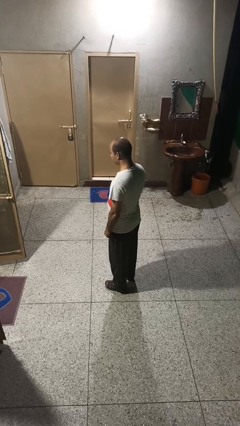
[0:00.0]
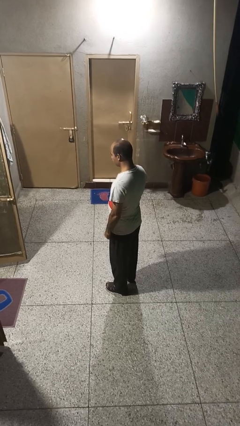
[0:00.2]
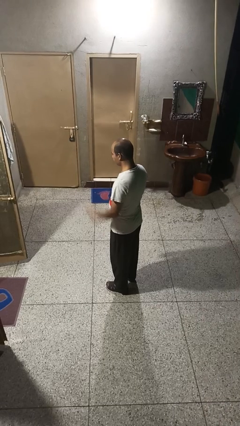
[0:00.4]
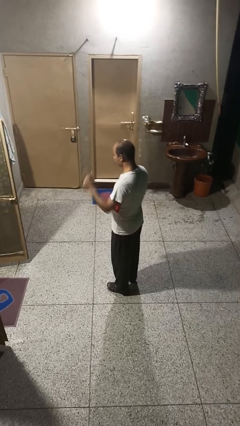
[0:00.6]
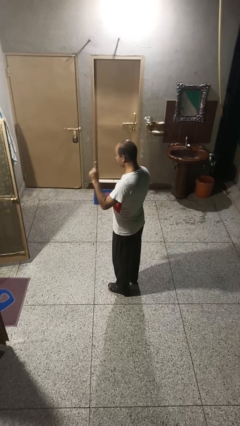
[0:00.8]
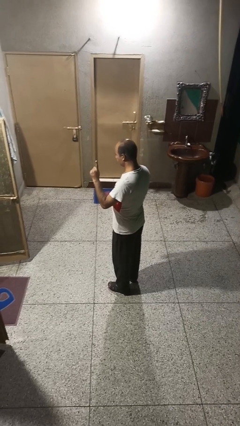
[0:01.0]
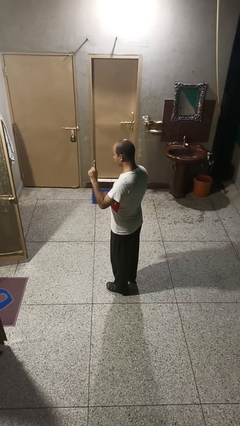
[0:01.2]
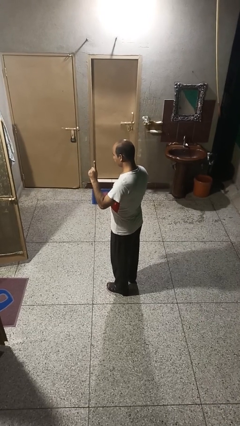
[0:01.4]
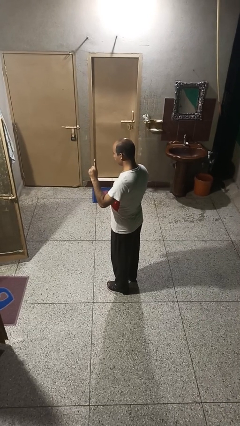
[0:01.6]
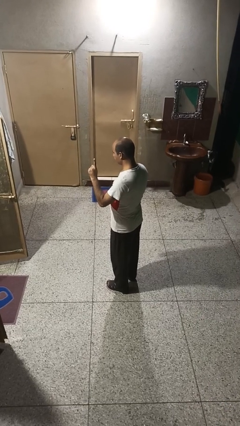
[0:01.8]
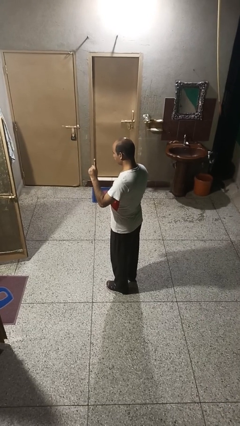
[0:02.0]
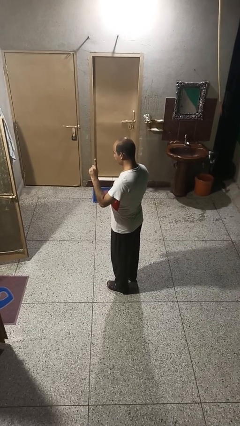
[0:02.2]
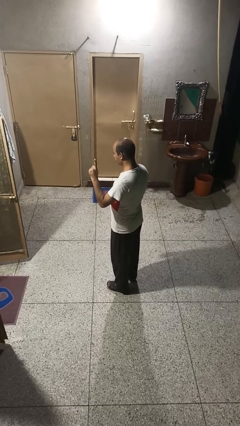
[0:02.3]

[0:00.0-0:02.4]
person gestures number one

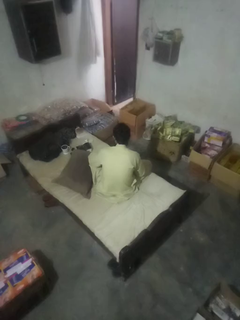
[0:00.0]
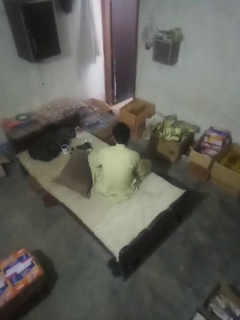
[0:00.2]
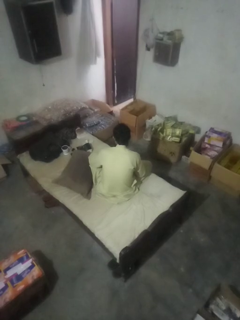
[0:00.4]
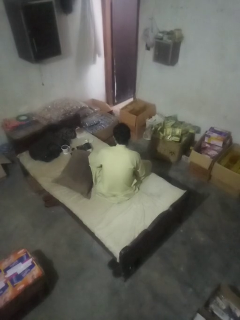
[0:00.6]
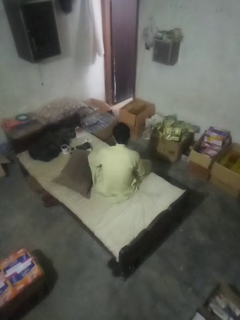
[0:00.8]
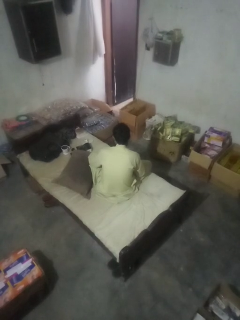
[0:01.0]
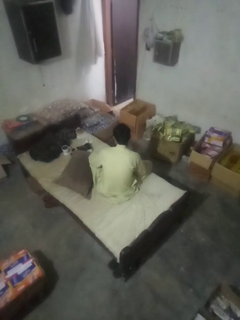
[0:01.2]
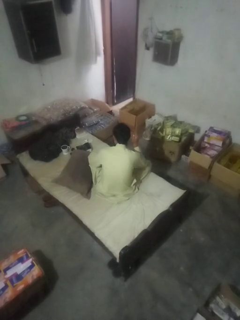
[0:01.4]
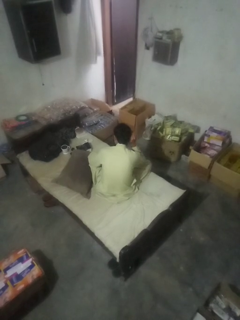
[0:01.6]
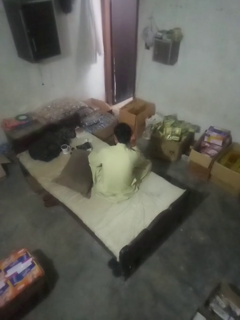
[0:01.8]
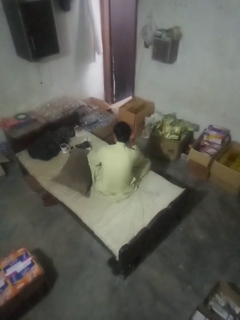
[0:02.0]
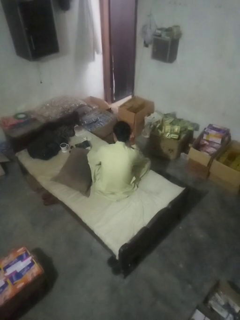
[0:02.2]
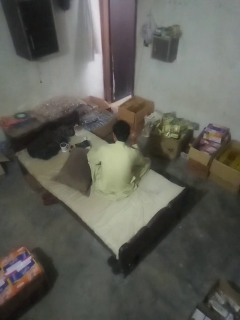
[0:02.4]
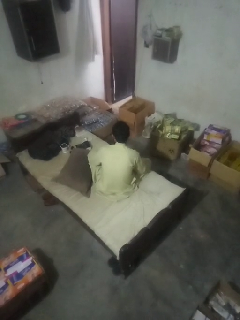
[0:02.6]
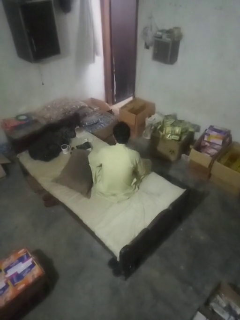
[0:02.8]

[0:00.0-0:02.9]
person gestures listen closely

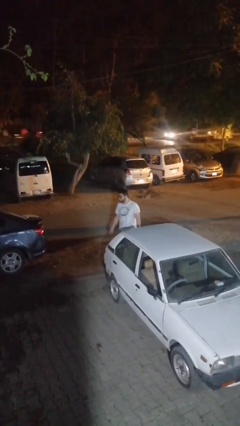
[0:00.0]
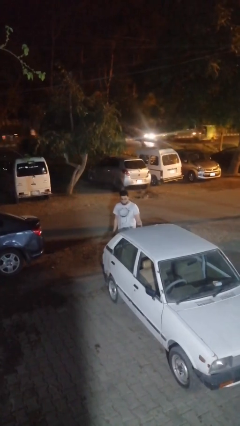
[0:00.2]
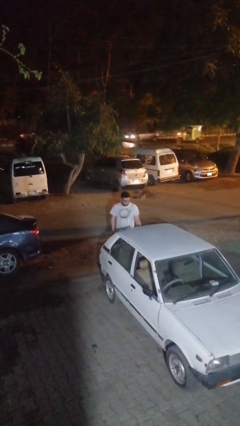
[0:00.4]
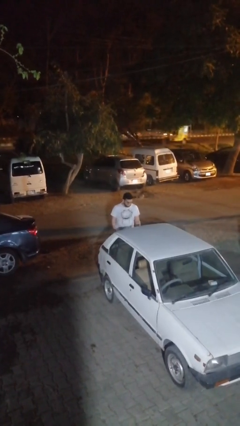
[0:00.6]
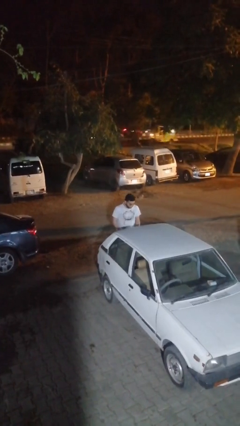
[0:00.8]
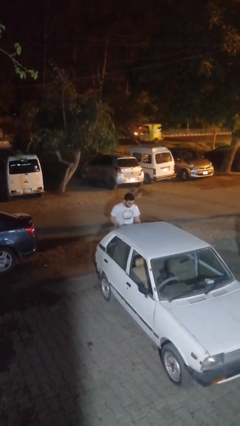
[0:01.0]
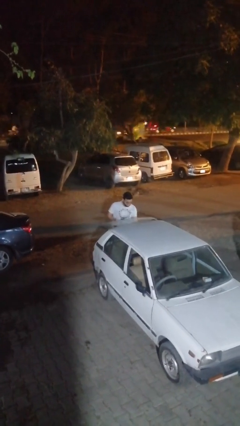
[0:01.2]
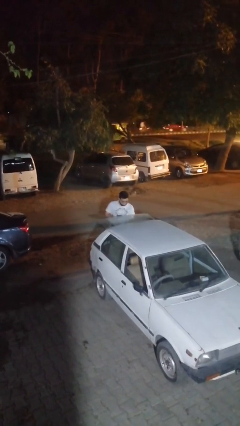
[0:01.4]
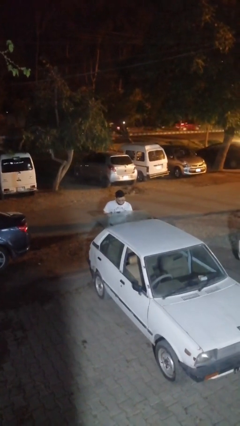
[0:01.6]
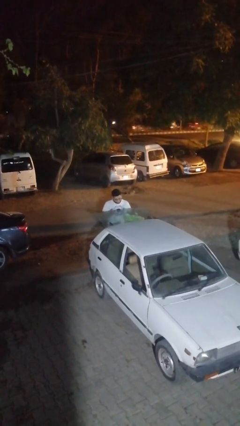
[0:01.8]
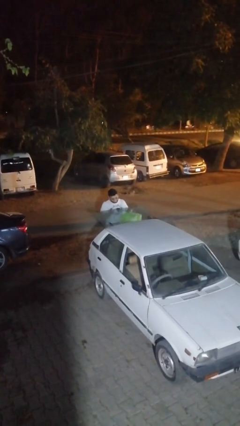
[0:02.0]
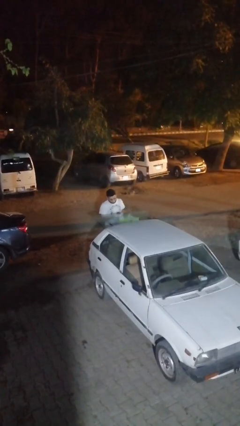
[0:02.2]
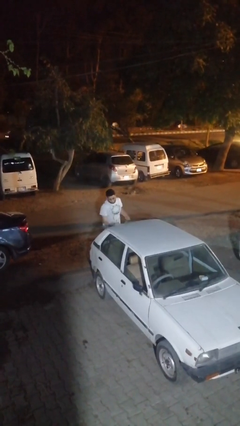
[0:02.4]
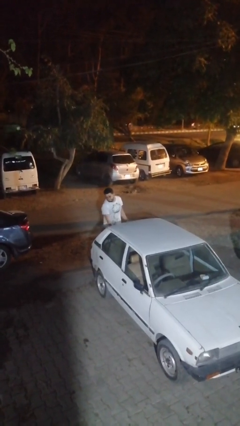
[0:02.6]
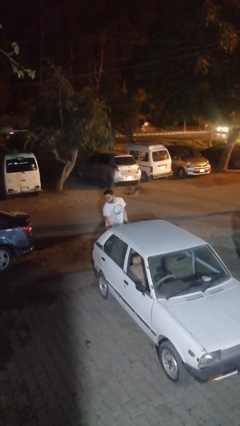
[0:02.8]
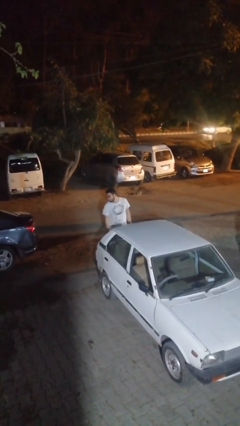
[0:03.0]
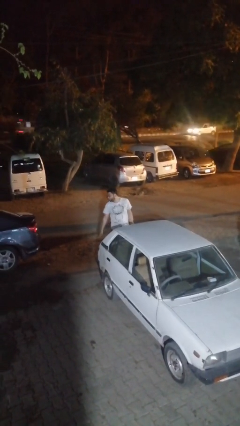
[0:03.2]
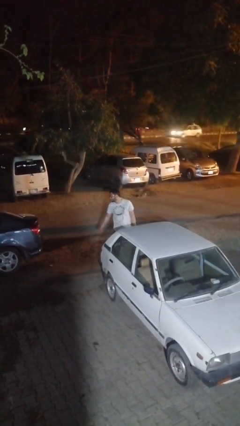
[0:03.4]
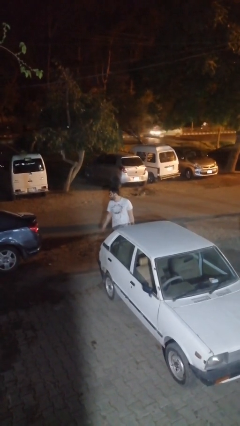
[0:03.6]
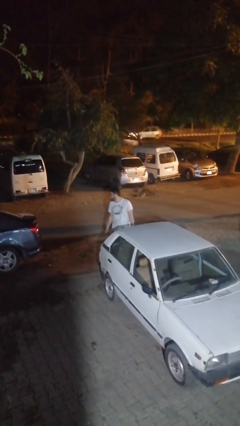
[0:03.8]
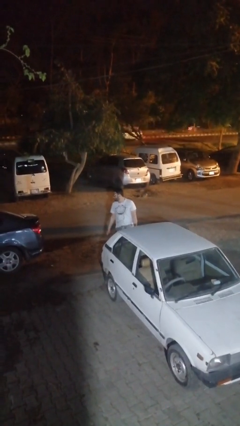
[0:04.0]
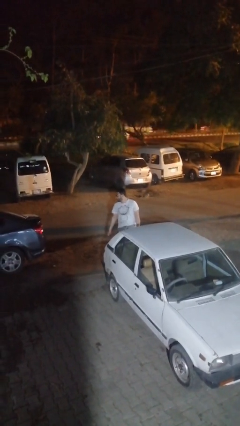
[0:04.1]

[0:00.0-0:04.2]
person unloads car

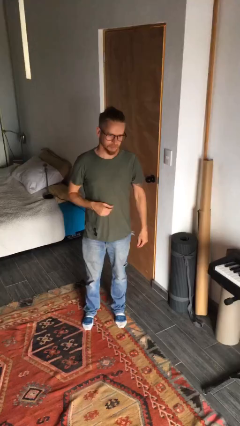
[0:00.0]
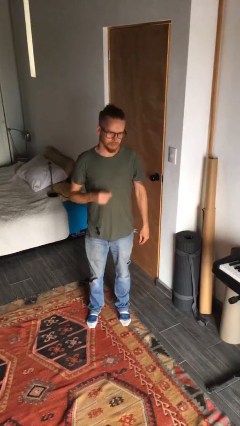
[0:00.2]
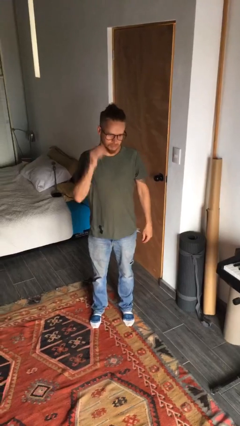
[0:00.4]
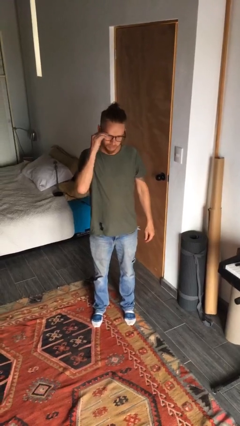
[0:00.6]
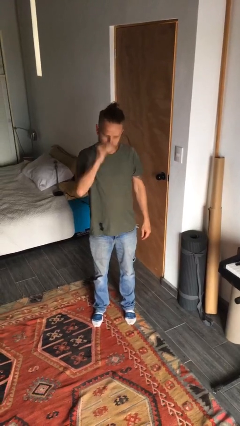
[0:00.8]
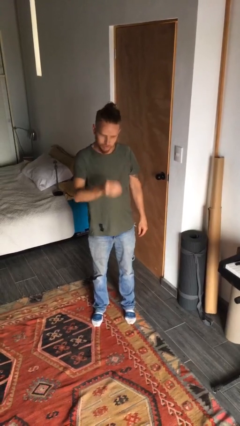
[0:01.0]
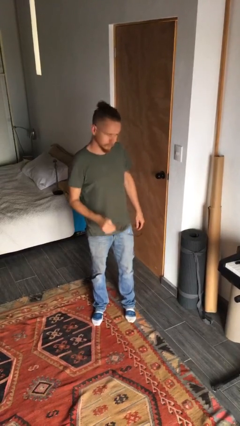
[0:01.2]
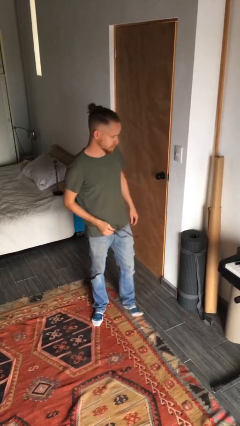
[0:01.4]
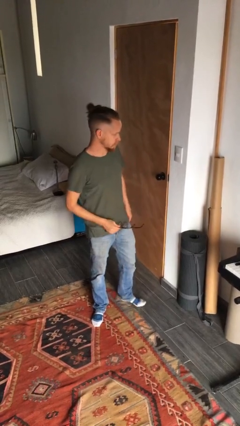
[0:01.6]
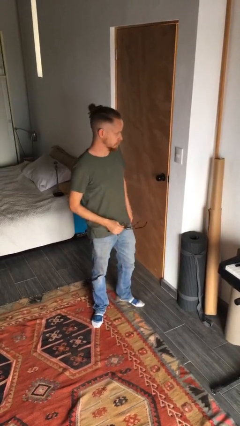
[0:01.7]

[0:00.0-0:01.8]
person takes off glasses

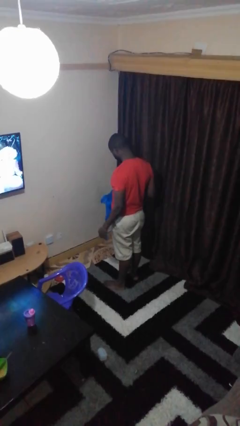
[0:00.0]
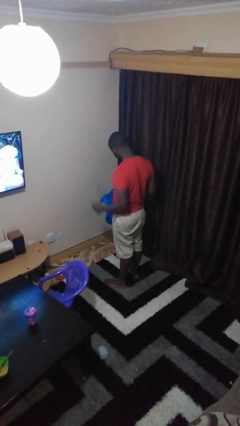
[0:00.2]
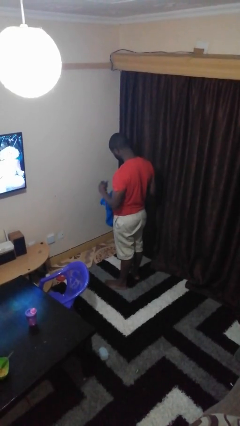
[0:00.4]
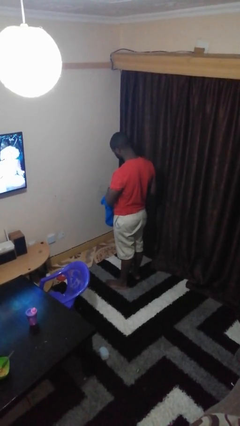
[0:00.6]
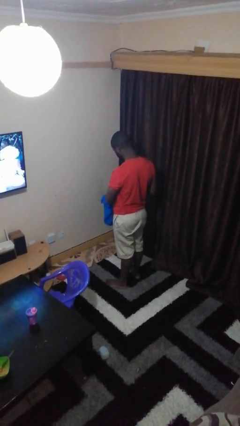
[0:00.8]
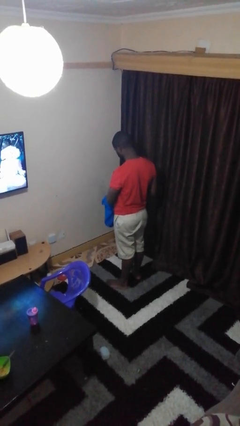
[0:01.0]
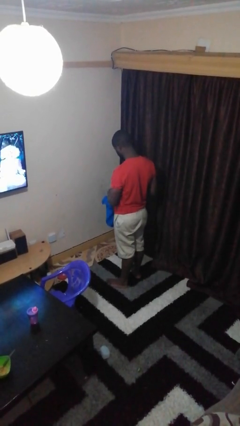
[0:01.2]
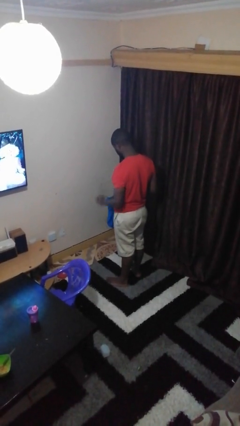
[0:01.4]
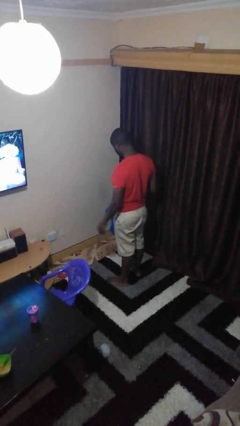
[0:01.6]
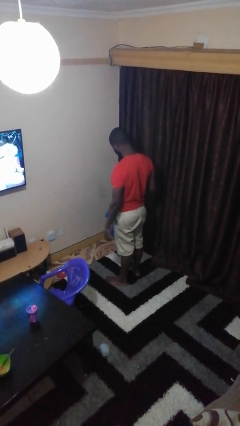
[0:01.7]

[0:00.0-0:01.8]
person puts object into bag

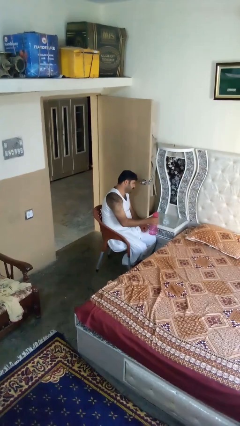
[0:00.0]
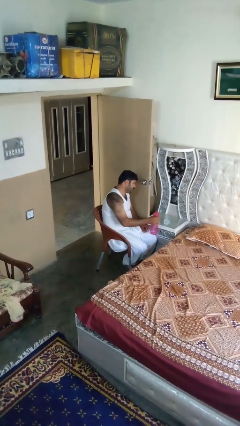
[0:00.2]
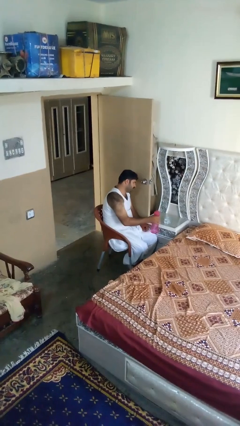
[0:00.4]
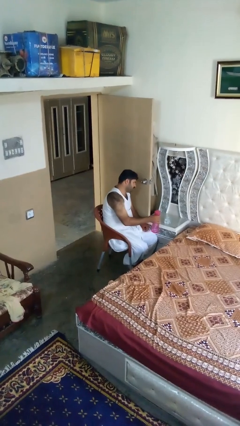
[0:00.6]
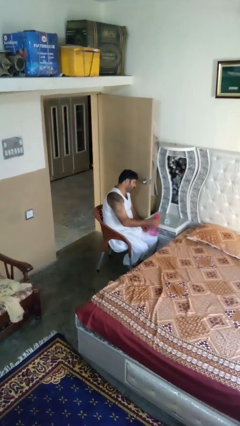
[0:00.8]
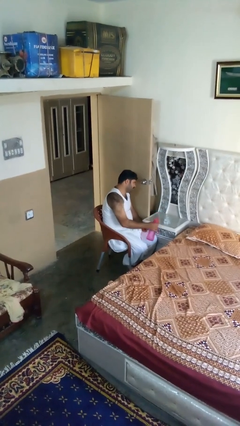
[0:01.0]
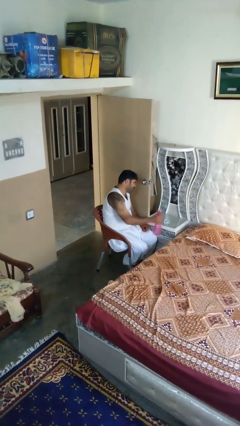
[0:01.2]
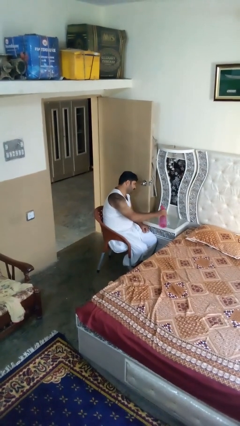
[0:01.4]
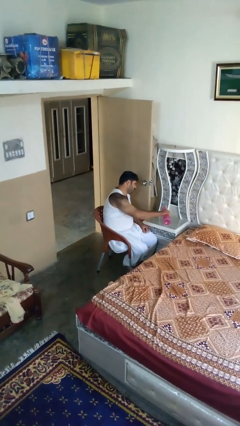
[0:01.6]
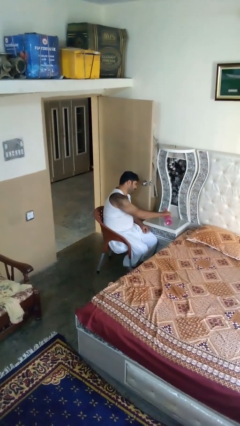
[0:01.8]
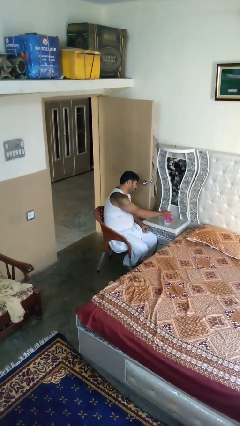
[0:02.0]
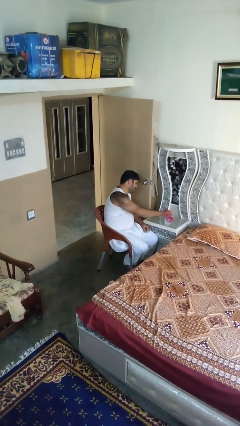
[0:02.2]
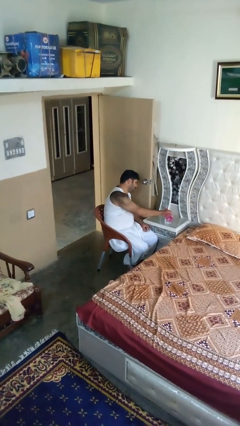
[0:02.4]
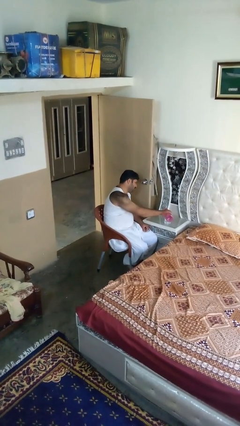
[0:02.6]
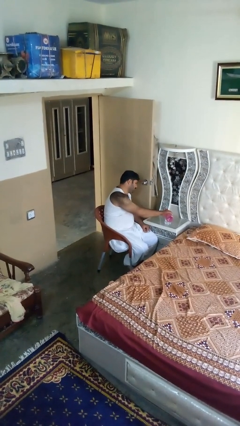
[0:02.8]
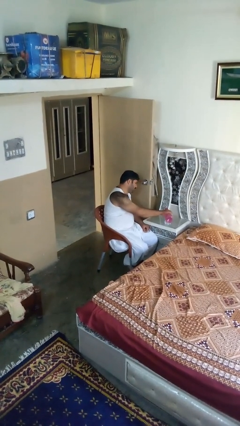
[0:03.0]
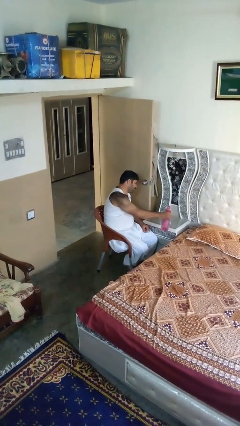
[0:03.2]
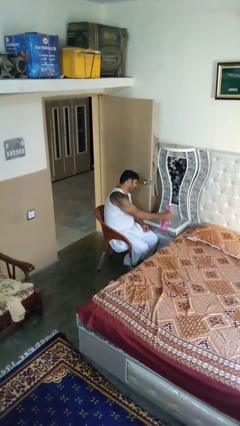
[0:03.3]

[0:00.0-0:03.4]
person pours liquid into cup

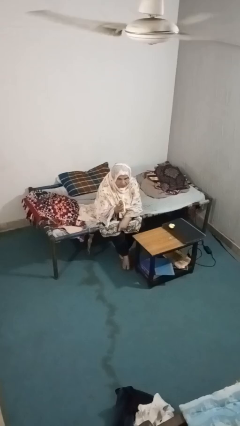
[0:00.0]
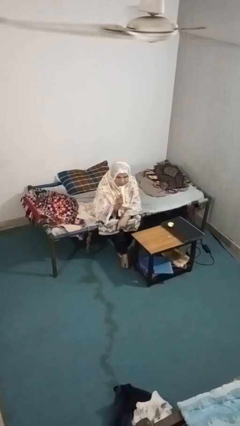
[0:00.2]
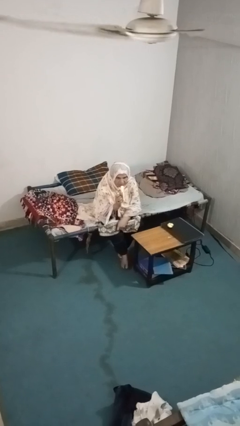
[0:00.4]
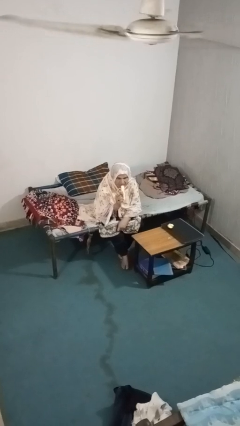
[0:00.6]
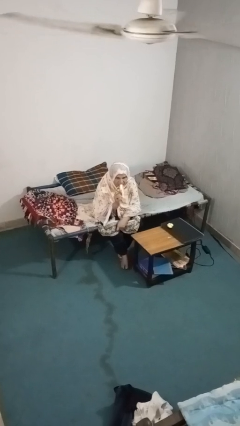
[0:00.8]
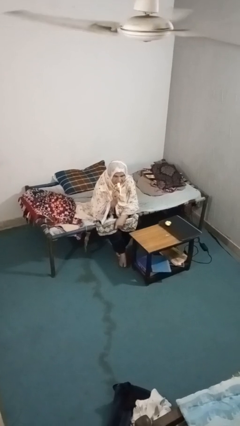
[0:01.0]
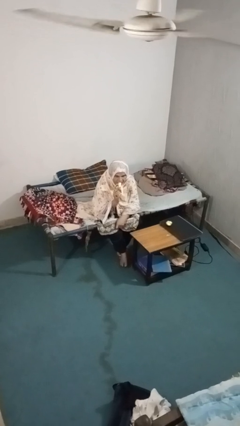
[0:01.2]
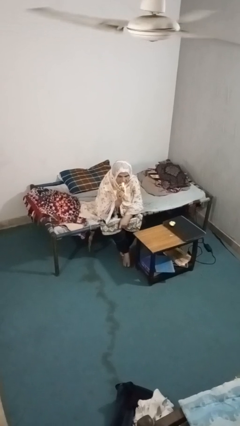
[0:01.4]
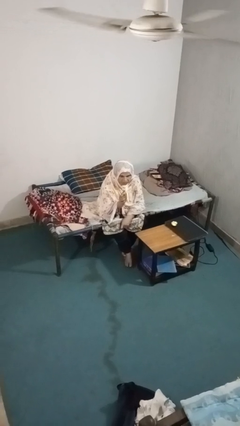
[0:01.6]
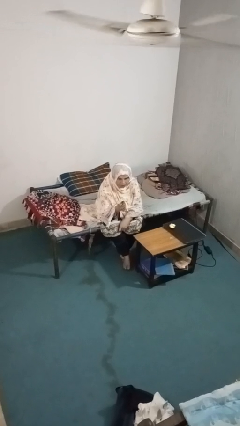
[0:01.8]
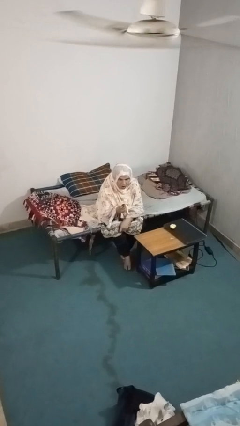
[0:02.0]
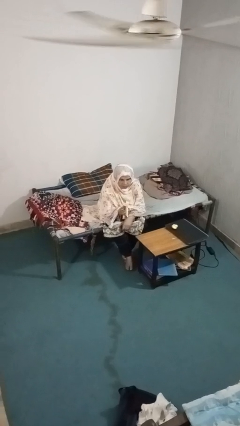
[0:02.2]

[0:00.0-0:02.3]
person eats banana
